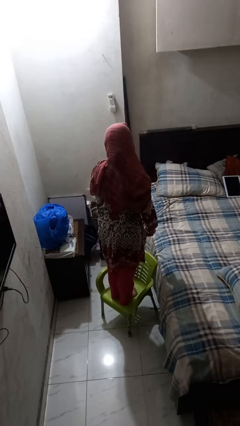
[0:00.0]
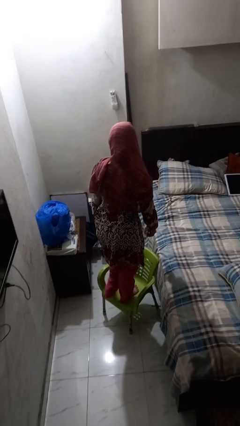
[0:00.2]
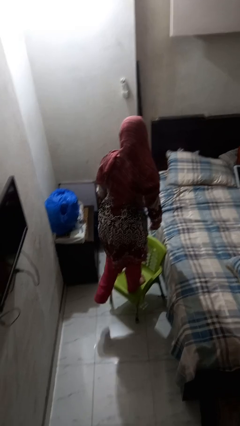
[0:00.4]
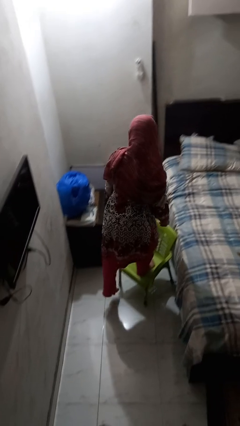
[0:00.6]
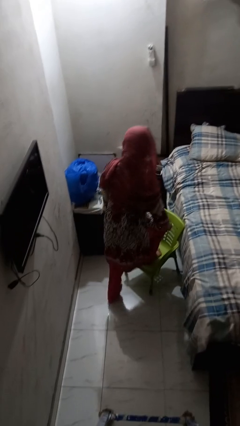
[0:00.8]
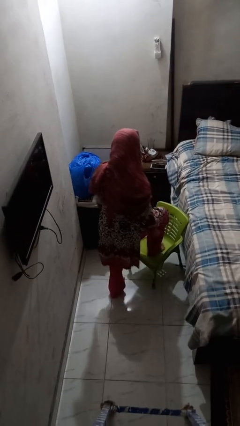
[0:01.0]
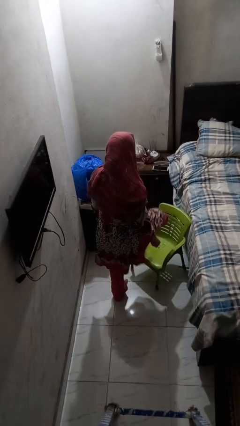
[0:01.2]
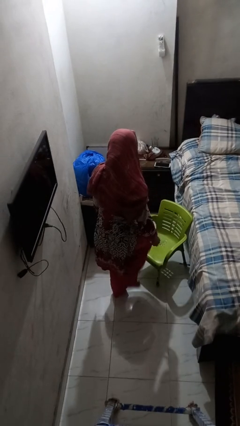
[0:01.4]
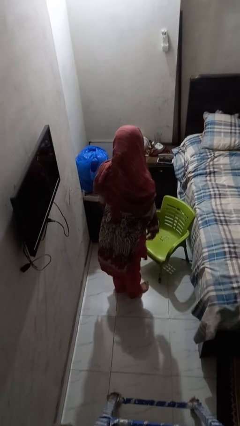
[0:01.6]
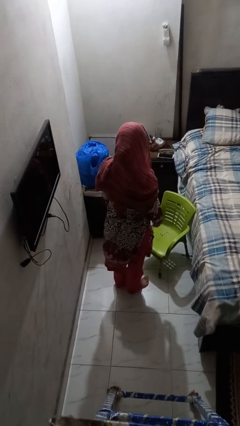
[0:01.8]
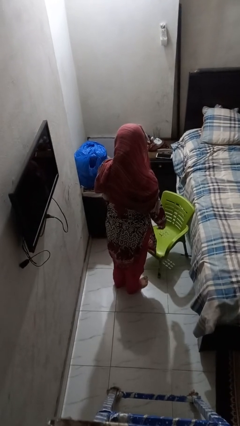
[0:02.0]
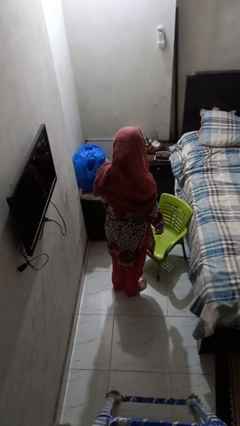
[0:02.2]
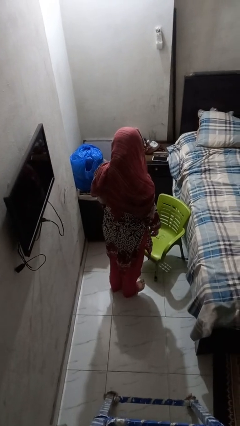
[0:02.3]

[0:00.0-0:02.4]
person climbs off chair

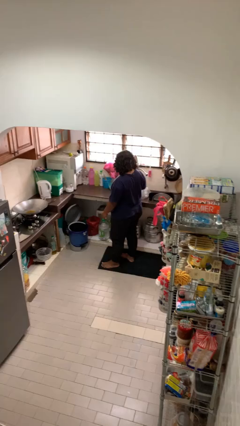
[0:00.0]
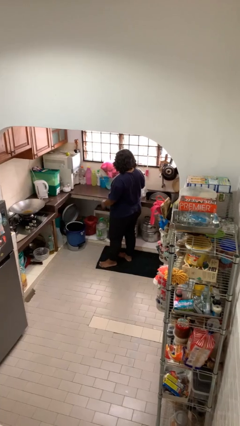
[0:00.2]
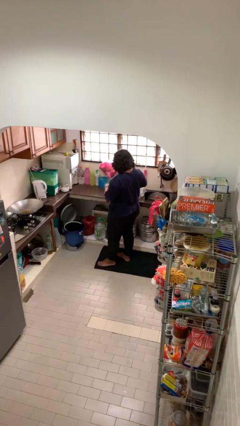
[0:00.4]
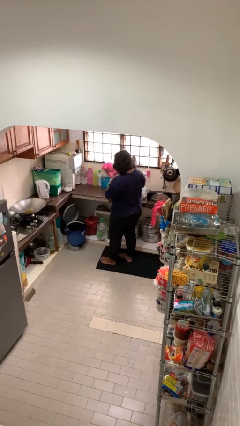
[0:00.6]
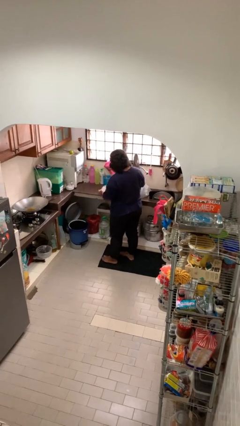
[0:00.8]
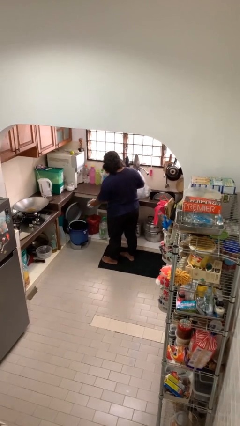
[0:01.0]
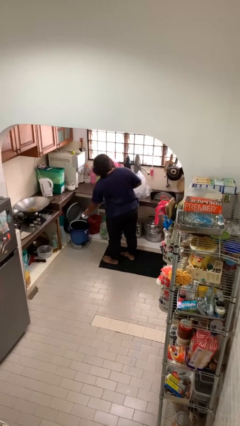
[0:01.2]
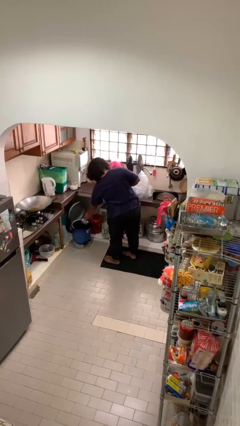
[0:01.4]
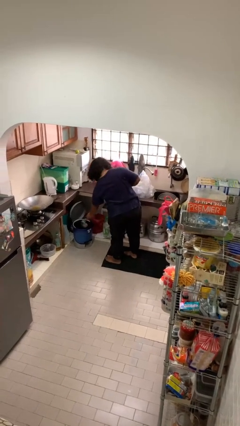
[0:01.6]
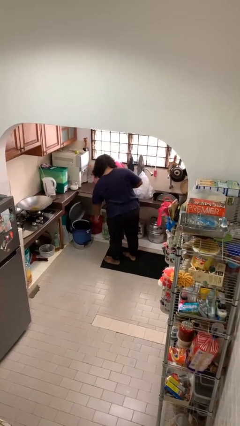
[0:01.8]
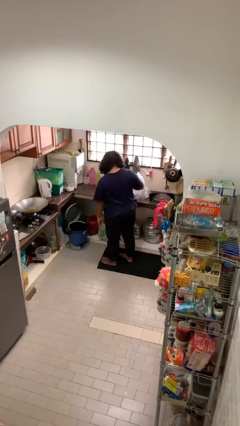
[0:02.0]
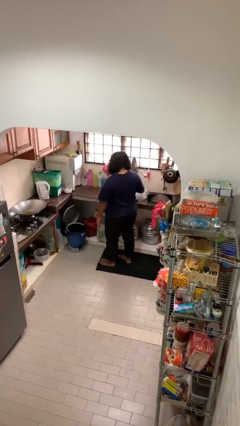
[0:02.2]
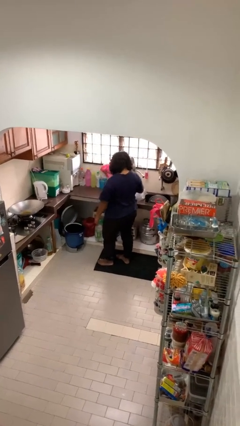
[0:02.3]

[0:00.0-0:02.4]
person discards trash

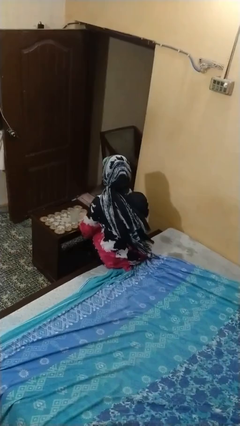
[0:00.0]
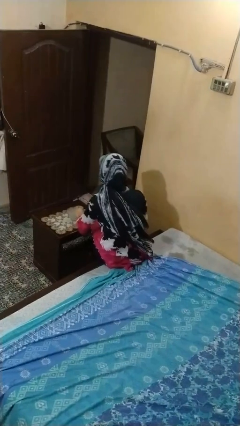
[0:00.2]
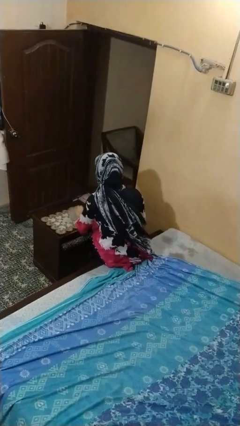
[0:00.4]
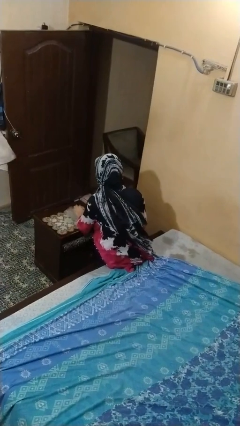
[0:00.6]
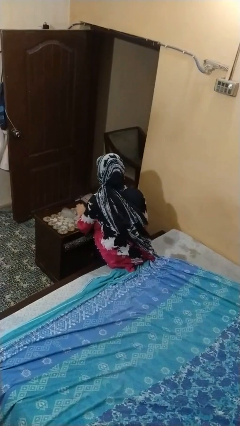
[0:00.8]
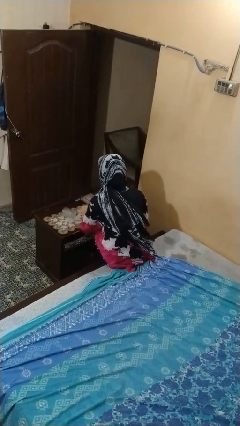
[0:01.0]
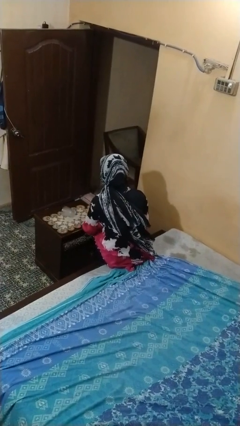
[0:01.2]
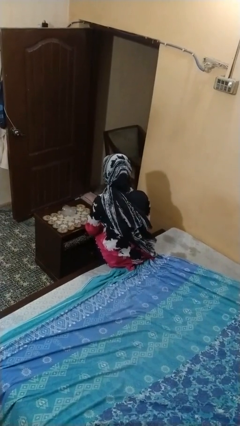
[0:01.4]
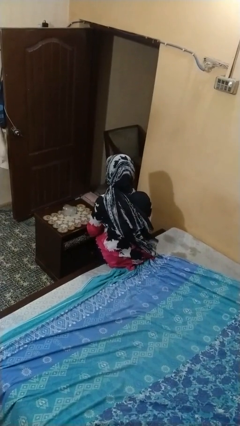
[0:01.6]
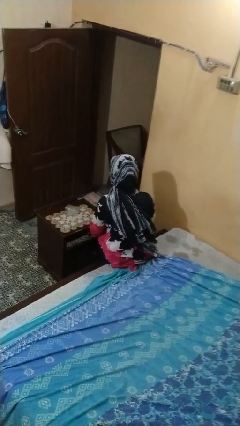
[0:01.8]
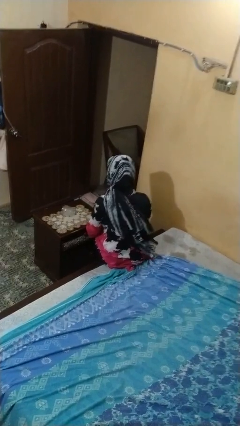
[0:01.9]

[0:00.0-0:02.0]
person knocks over glass

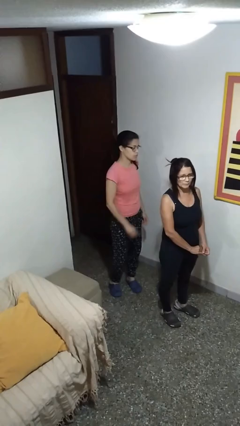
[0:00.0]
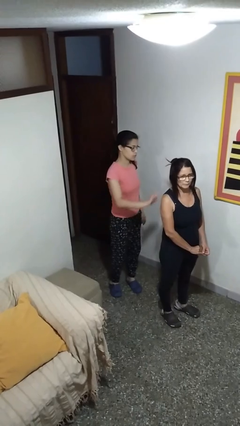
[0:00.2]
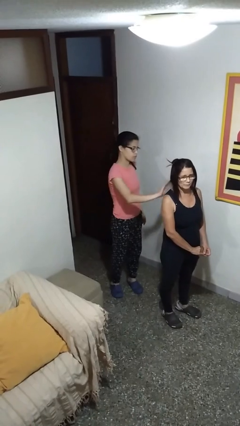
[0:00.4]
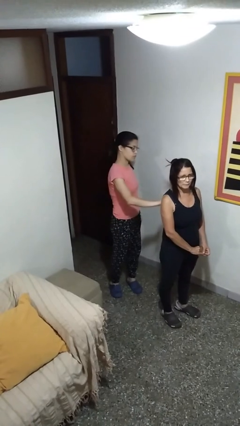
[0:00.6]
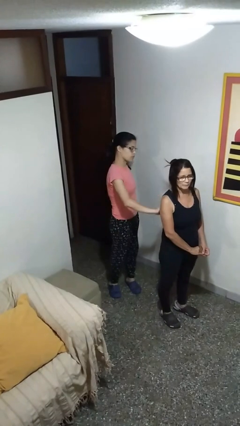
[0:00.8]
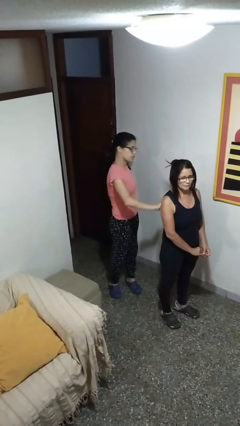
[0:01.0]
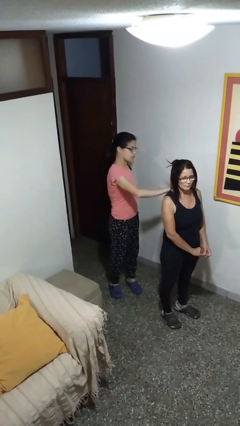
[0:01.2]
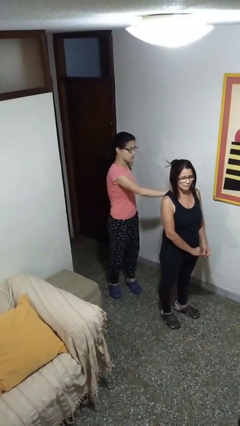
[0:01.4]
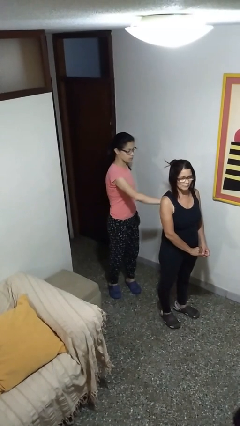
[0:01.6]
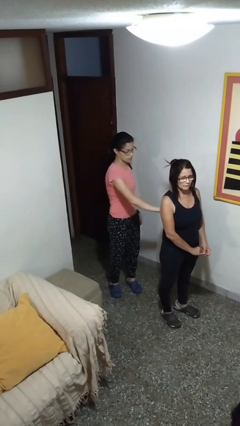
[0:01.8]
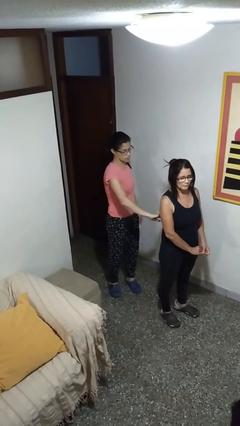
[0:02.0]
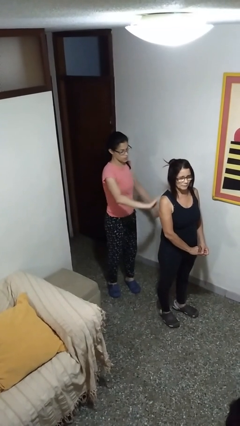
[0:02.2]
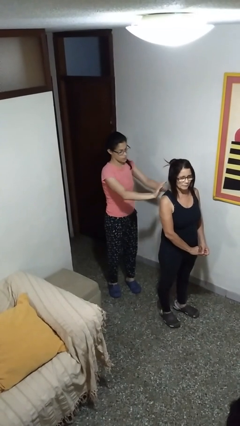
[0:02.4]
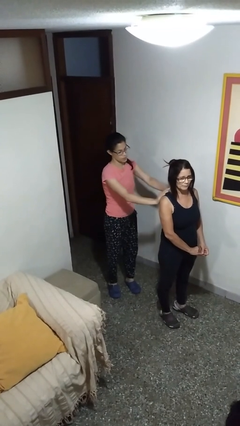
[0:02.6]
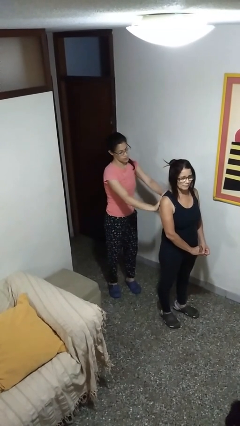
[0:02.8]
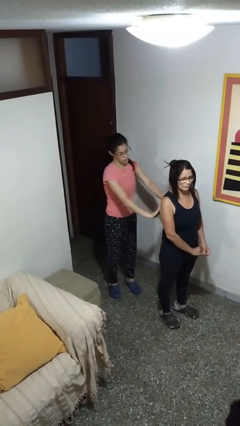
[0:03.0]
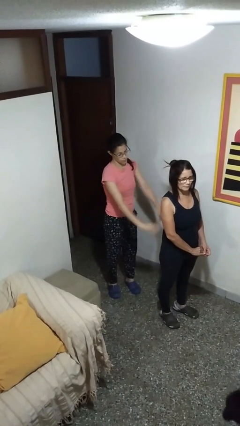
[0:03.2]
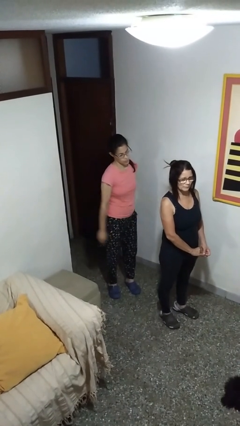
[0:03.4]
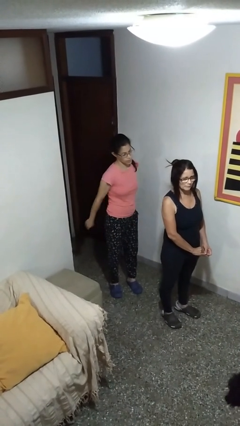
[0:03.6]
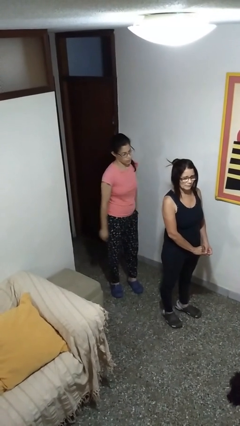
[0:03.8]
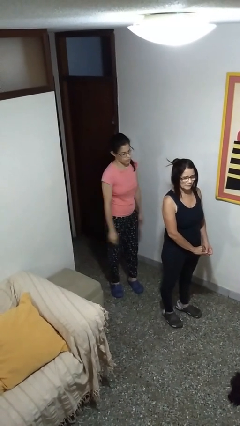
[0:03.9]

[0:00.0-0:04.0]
person touches back of person

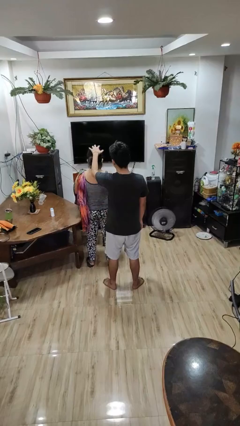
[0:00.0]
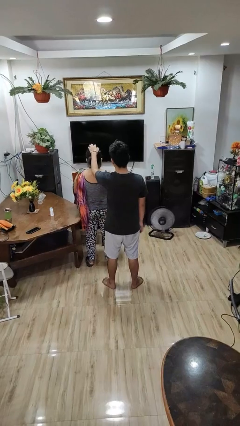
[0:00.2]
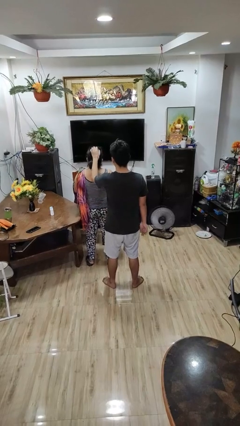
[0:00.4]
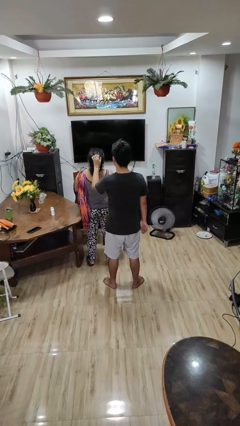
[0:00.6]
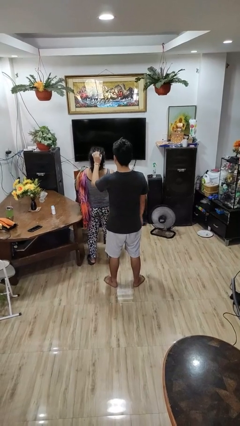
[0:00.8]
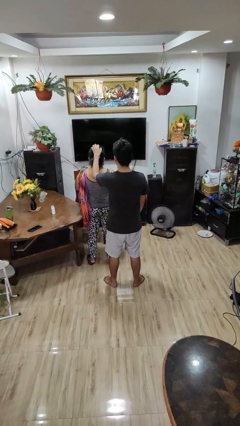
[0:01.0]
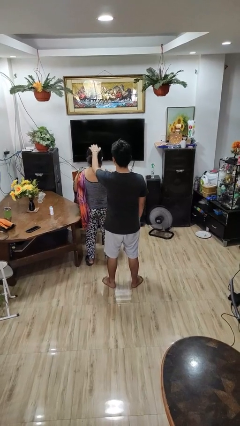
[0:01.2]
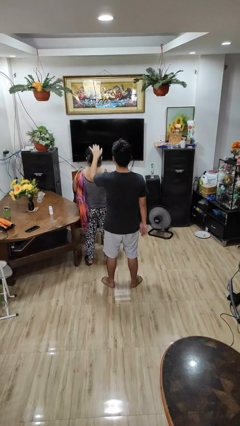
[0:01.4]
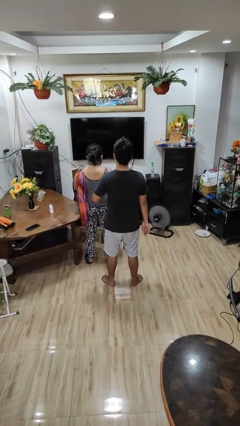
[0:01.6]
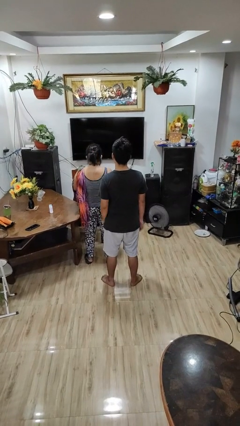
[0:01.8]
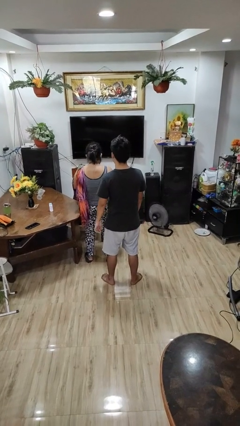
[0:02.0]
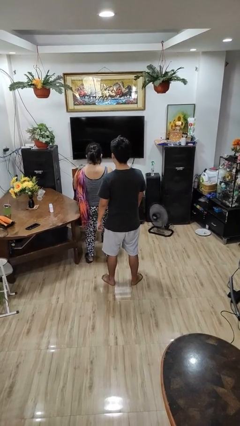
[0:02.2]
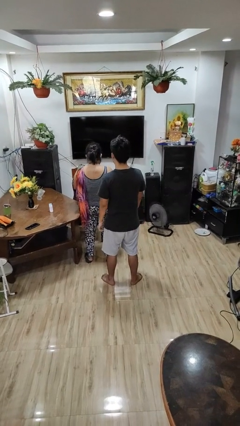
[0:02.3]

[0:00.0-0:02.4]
person grabs person by hair

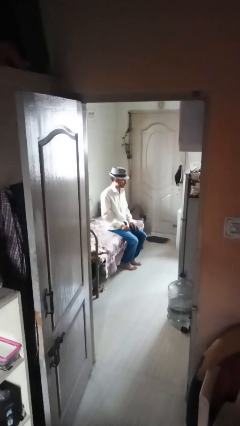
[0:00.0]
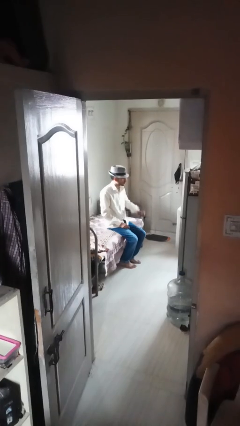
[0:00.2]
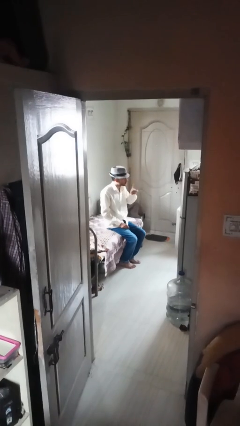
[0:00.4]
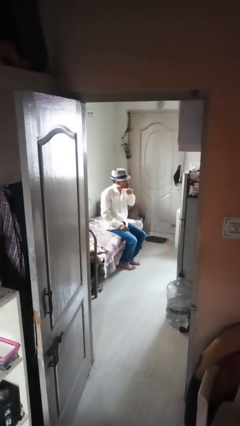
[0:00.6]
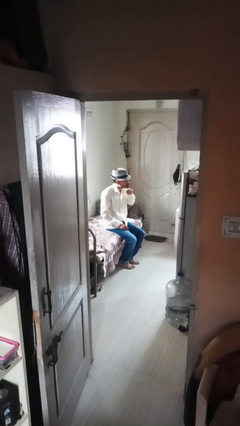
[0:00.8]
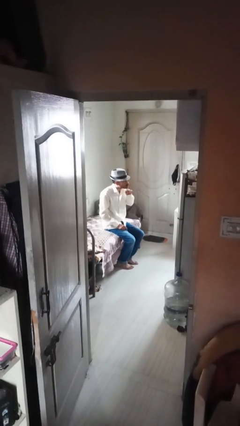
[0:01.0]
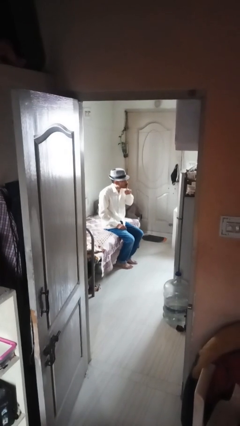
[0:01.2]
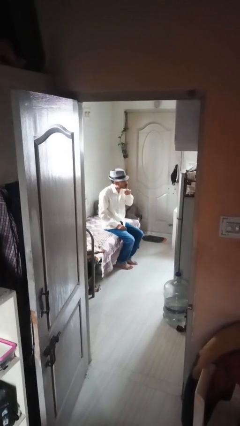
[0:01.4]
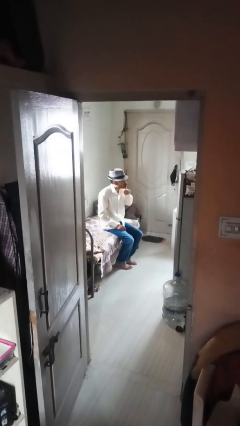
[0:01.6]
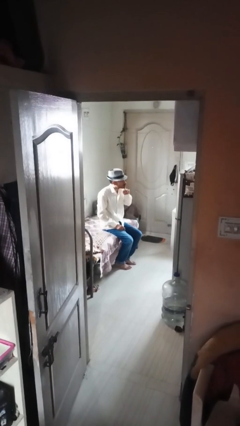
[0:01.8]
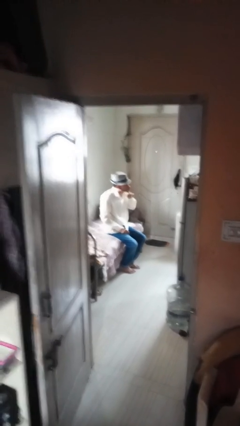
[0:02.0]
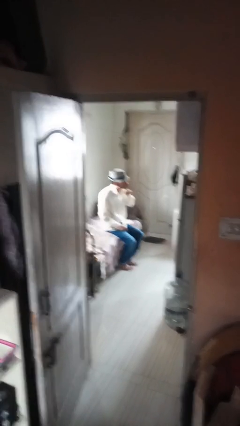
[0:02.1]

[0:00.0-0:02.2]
person gestures be quiet

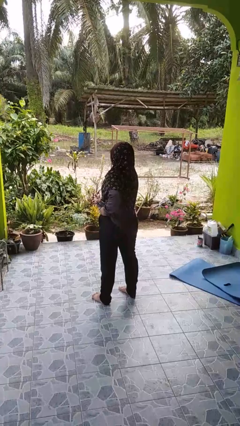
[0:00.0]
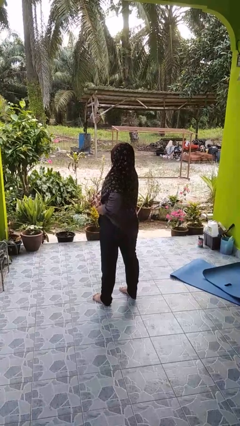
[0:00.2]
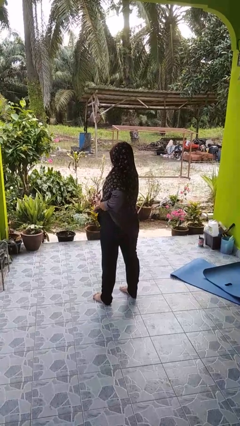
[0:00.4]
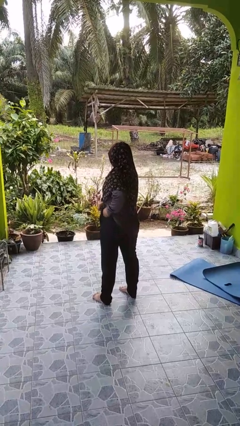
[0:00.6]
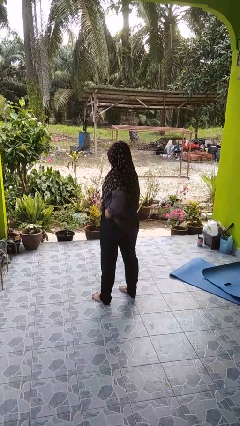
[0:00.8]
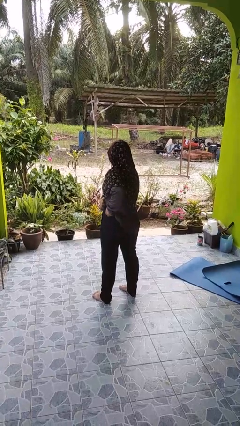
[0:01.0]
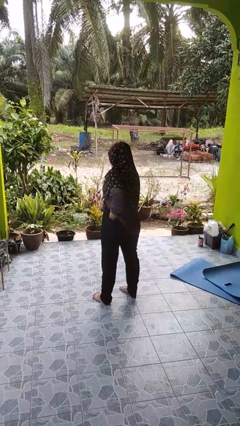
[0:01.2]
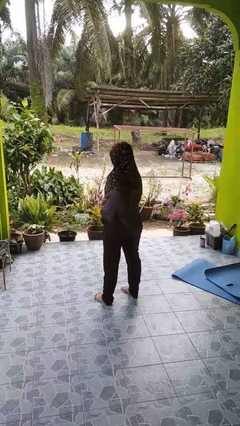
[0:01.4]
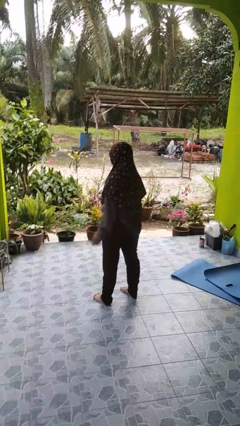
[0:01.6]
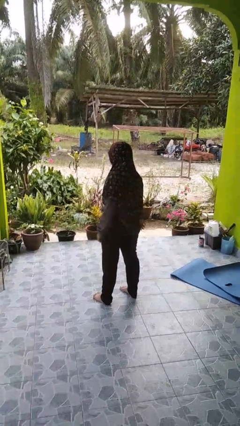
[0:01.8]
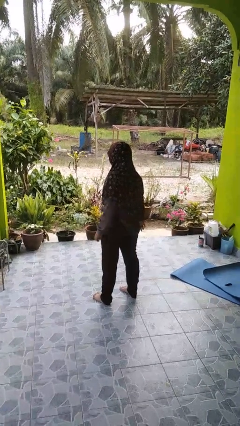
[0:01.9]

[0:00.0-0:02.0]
person tucks in shirt
